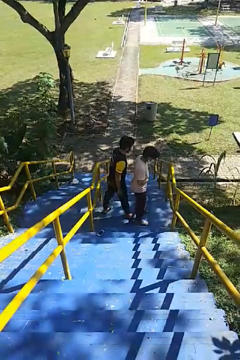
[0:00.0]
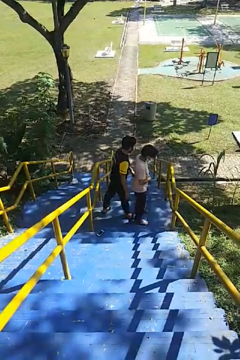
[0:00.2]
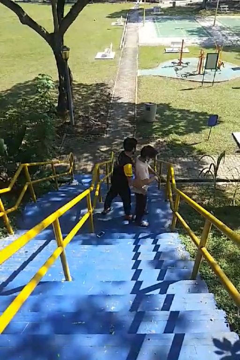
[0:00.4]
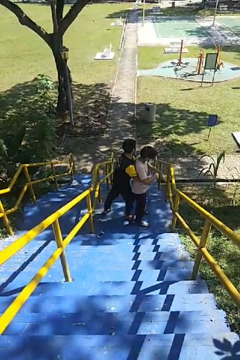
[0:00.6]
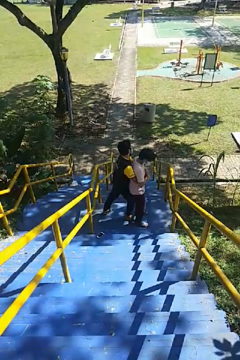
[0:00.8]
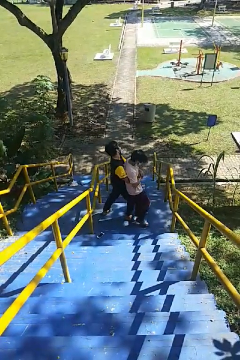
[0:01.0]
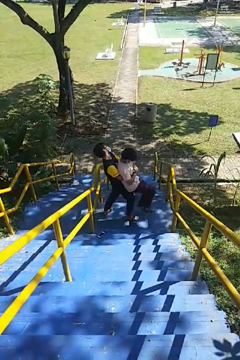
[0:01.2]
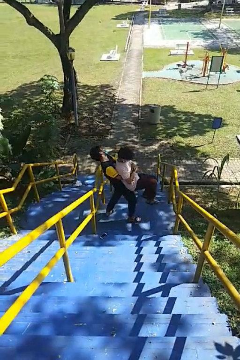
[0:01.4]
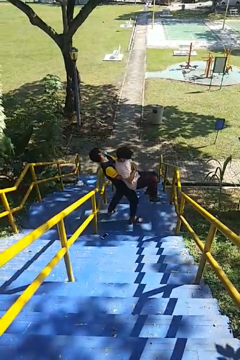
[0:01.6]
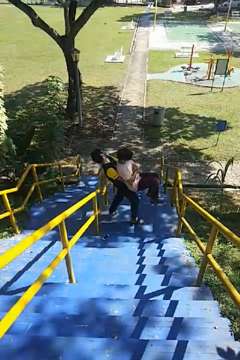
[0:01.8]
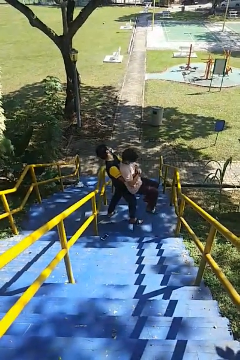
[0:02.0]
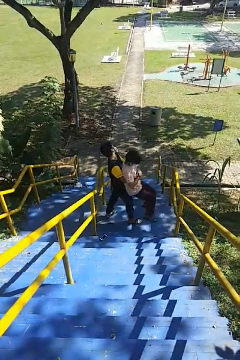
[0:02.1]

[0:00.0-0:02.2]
person picks up person

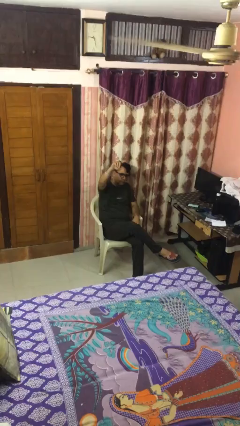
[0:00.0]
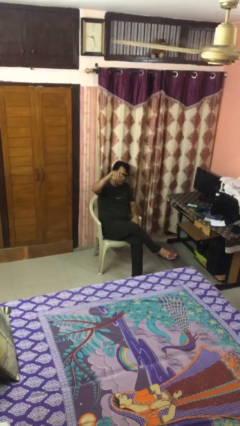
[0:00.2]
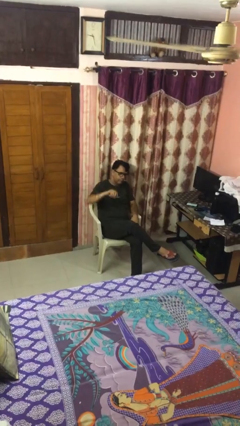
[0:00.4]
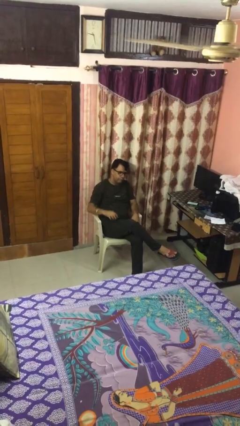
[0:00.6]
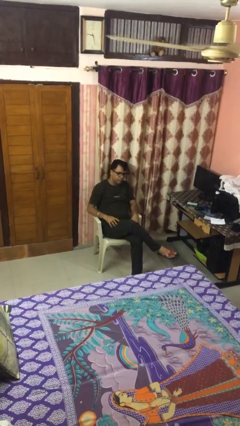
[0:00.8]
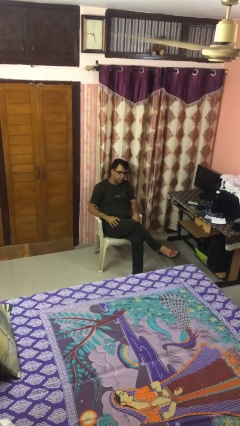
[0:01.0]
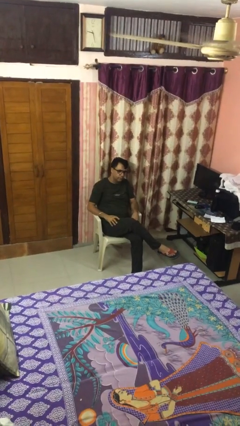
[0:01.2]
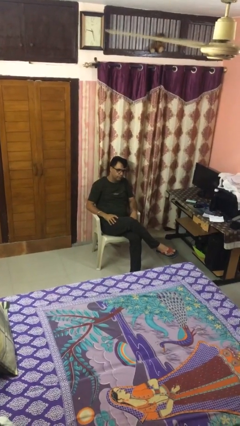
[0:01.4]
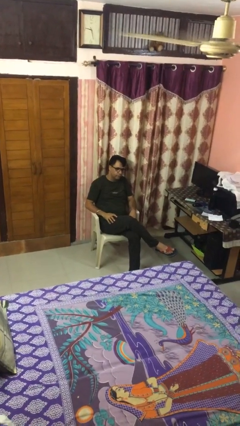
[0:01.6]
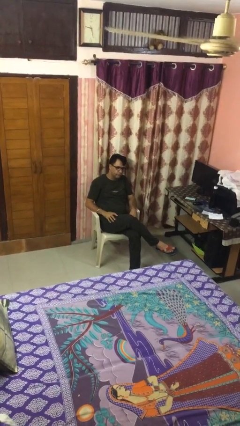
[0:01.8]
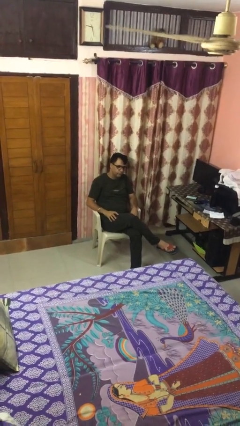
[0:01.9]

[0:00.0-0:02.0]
person gestures lower hand

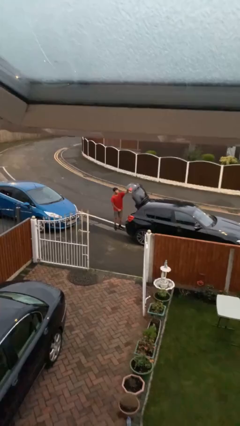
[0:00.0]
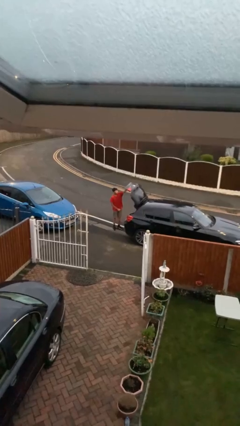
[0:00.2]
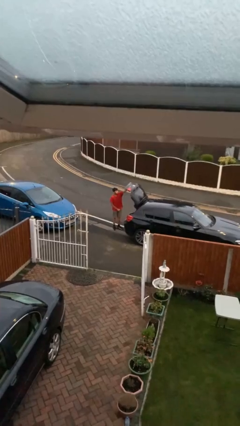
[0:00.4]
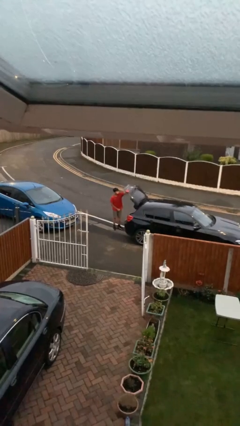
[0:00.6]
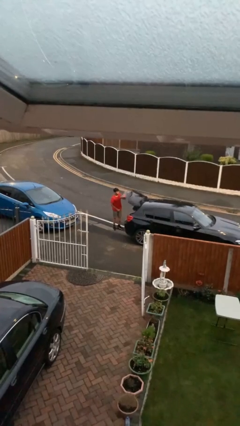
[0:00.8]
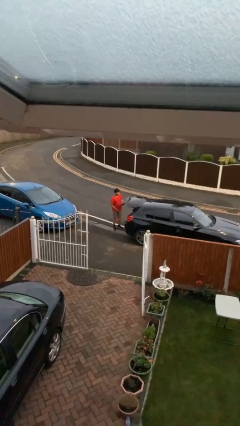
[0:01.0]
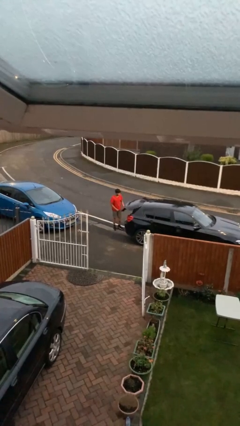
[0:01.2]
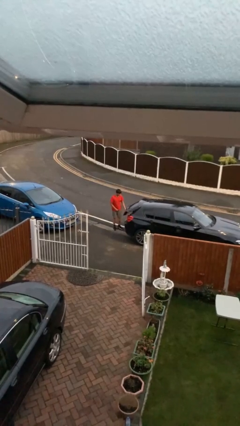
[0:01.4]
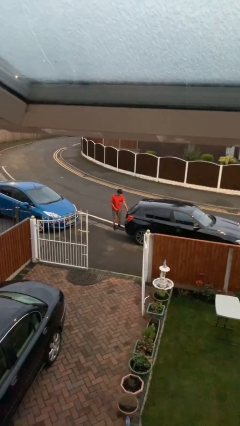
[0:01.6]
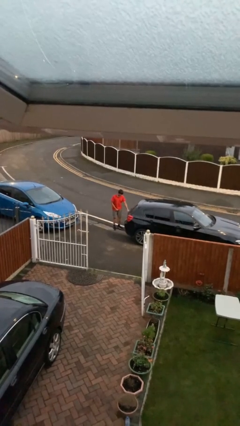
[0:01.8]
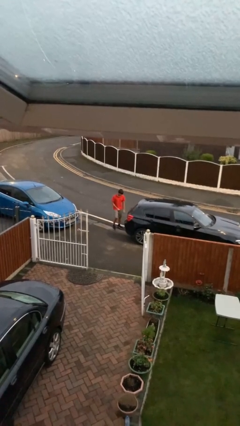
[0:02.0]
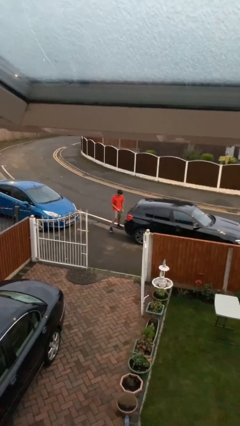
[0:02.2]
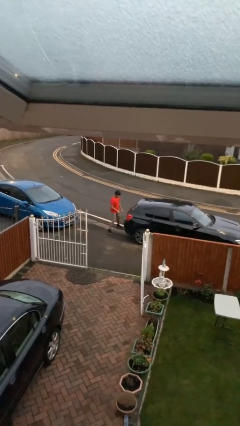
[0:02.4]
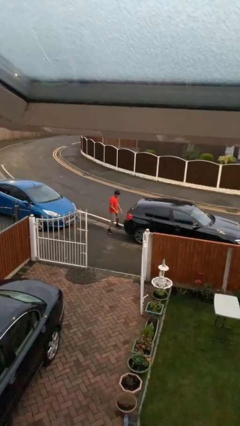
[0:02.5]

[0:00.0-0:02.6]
person closes car trunk

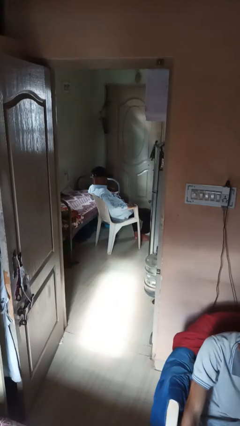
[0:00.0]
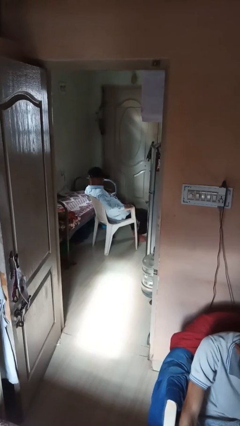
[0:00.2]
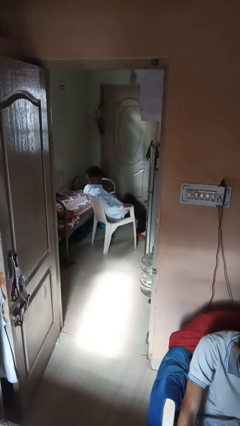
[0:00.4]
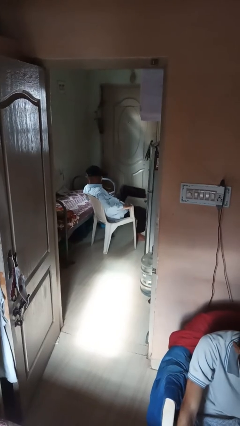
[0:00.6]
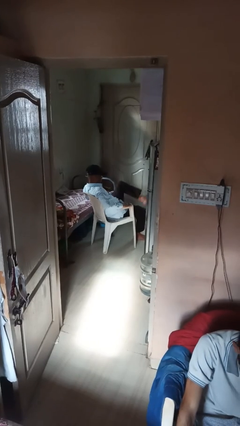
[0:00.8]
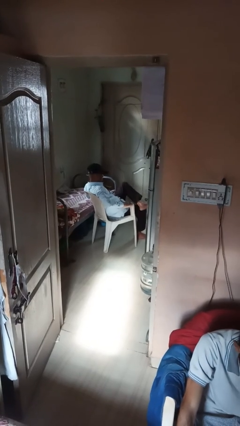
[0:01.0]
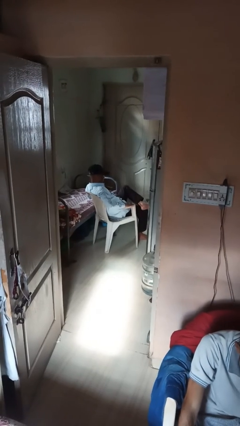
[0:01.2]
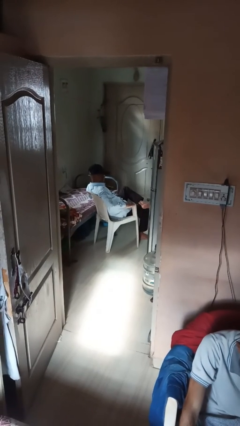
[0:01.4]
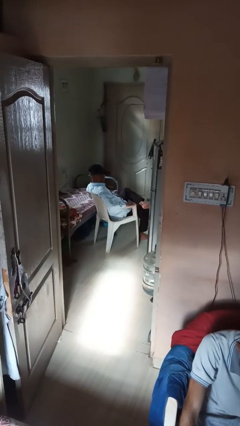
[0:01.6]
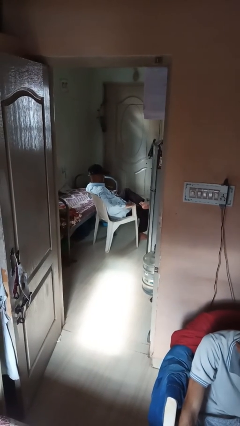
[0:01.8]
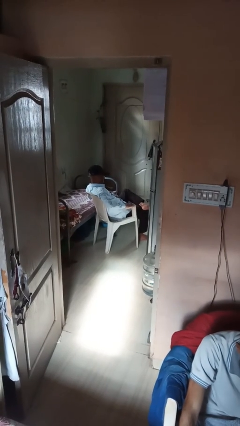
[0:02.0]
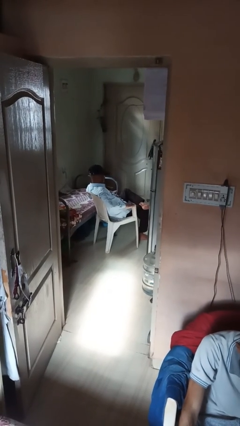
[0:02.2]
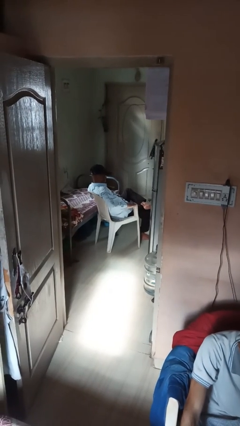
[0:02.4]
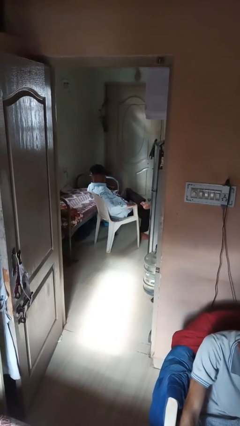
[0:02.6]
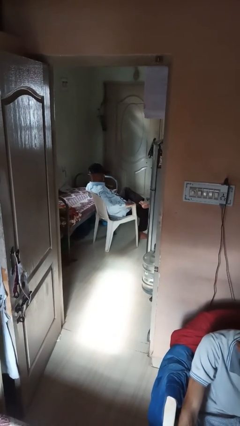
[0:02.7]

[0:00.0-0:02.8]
person crosses legs

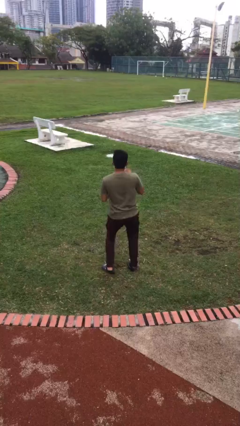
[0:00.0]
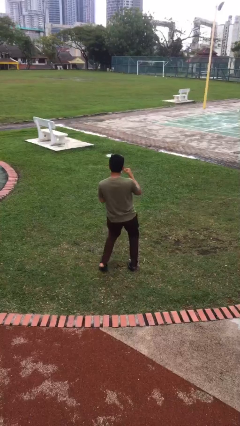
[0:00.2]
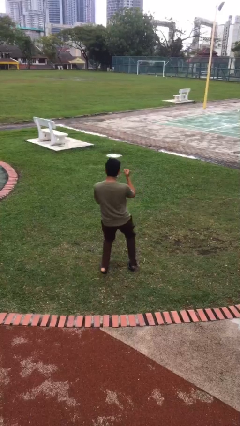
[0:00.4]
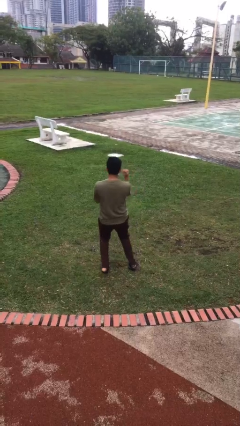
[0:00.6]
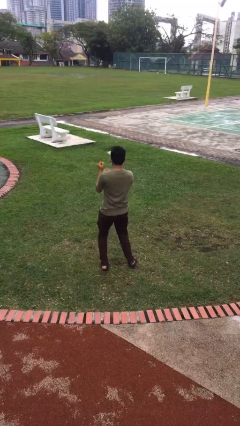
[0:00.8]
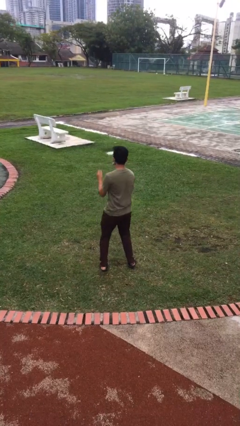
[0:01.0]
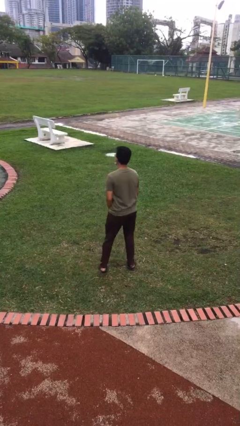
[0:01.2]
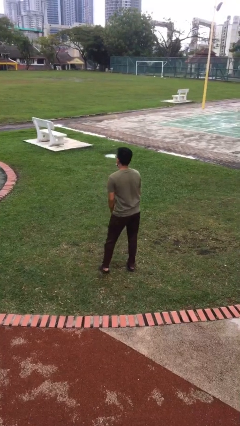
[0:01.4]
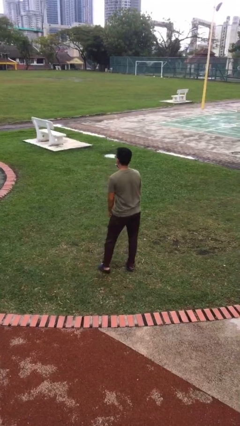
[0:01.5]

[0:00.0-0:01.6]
person dances in place

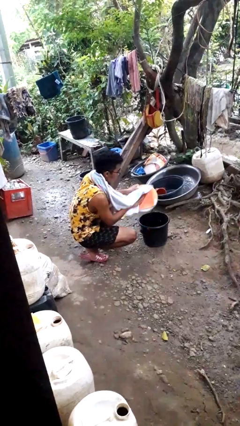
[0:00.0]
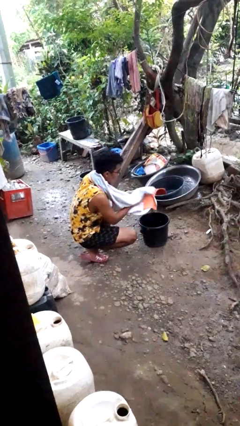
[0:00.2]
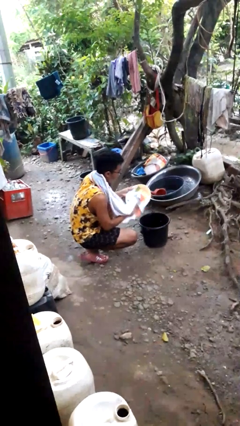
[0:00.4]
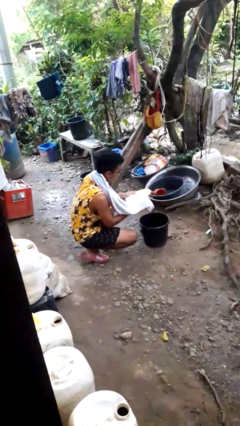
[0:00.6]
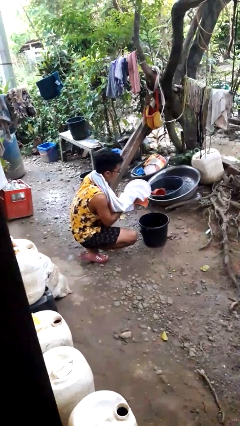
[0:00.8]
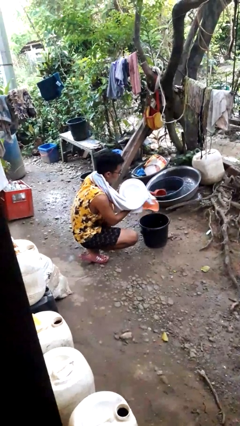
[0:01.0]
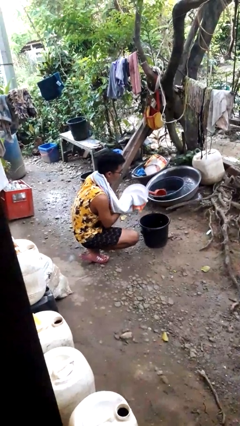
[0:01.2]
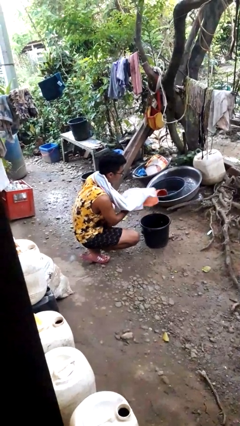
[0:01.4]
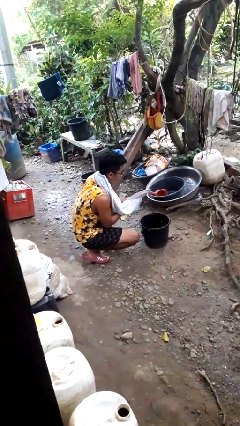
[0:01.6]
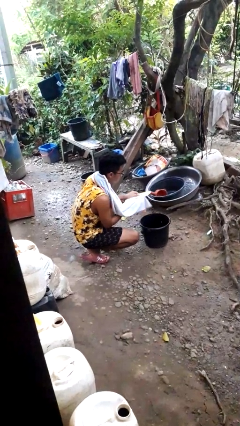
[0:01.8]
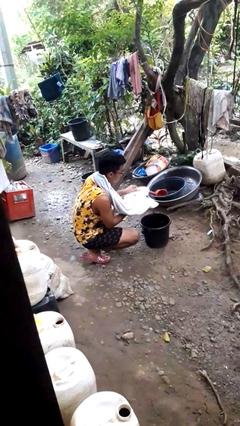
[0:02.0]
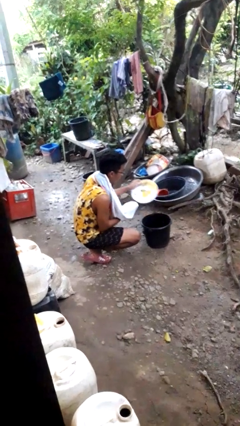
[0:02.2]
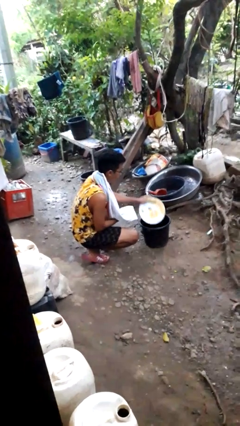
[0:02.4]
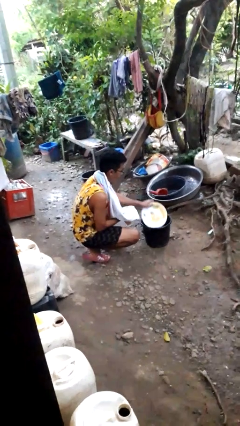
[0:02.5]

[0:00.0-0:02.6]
person dries dish

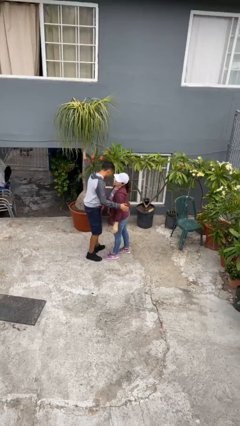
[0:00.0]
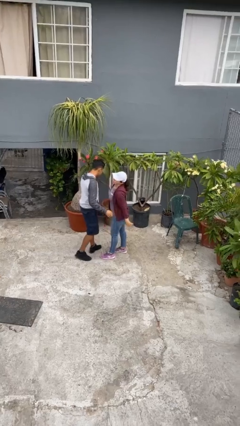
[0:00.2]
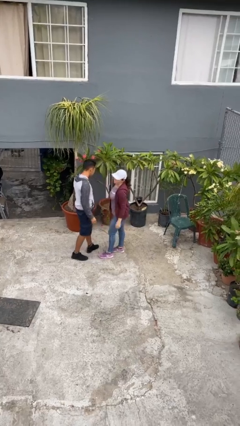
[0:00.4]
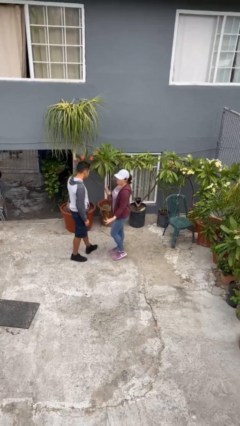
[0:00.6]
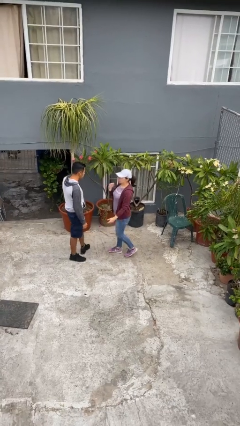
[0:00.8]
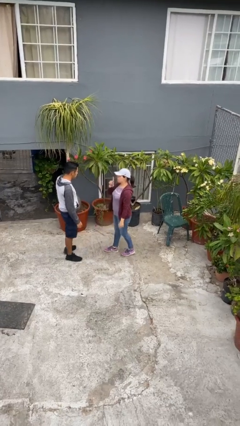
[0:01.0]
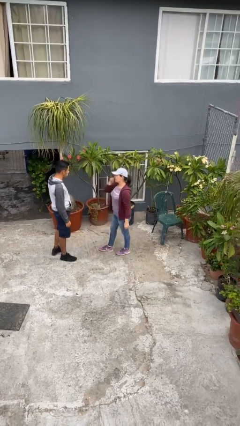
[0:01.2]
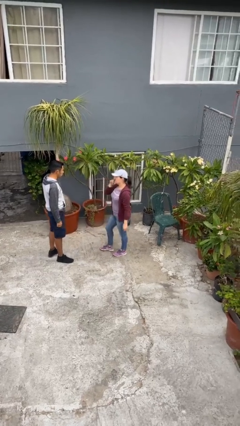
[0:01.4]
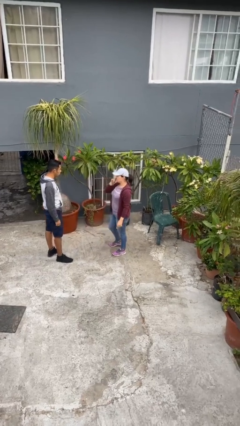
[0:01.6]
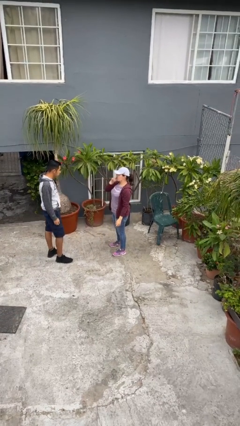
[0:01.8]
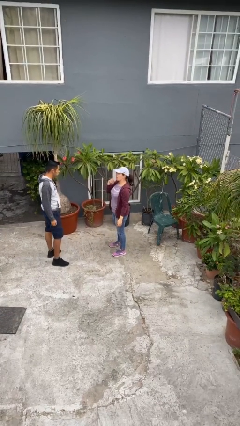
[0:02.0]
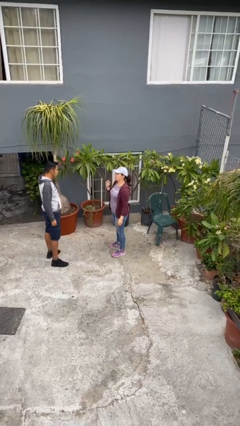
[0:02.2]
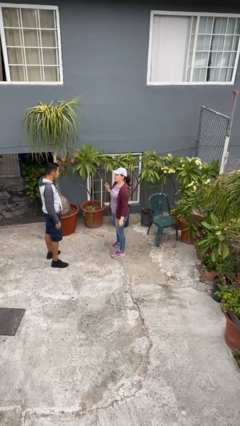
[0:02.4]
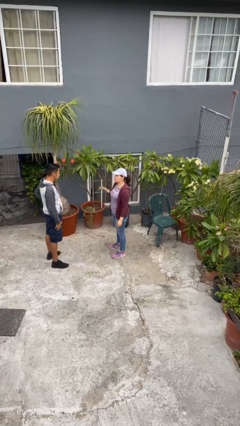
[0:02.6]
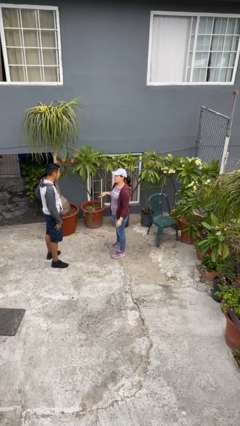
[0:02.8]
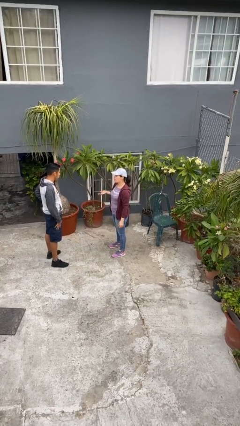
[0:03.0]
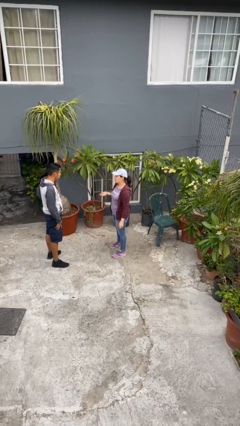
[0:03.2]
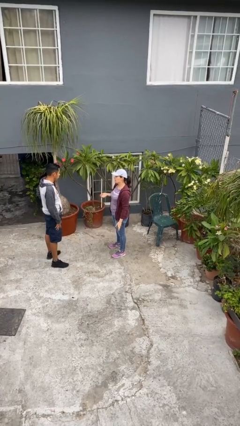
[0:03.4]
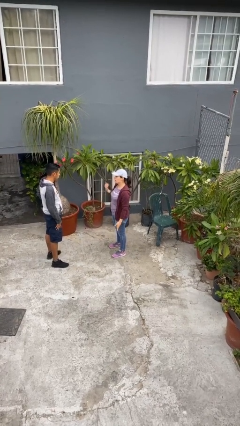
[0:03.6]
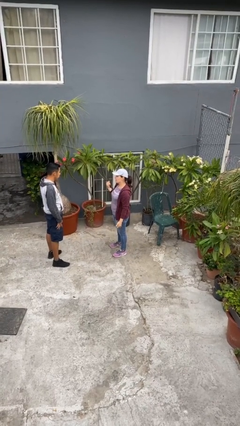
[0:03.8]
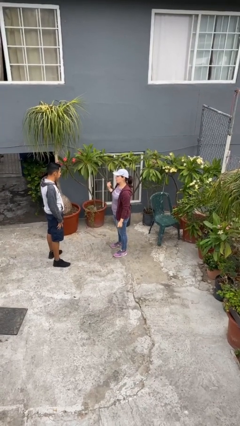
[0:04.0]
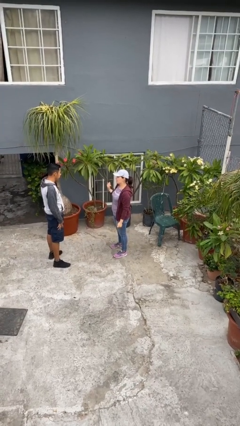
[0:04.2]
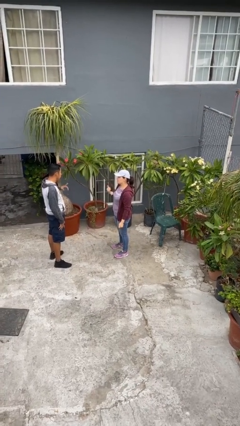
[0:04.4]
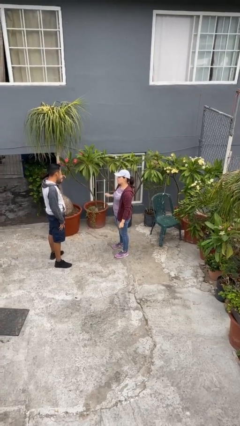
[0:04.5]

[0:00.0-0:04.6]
person talks to person
